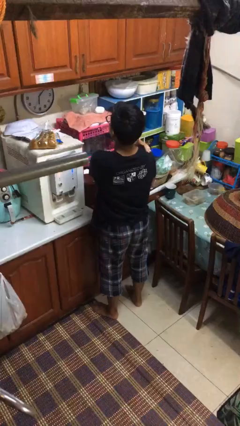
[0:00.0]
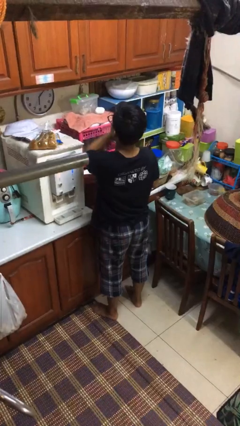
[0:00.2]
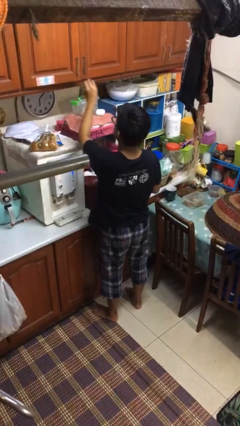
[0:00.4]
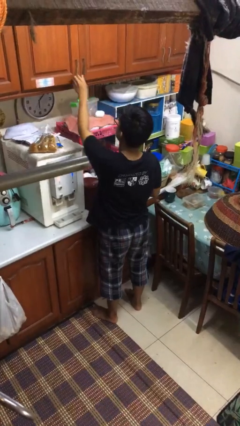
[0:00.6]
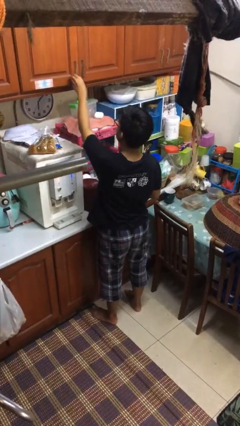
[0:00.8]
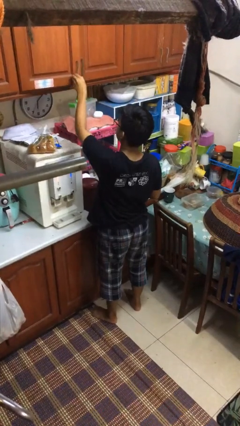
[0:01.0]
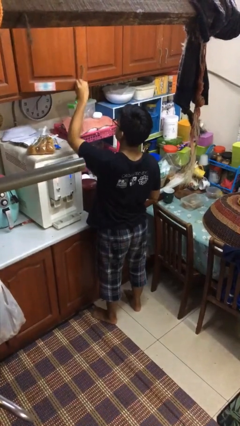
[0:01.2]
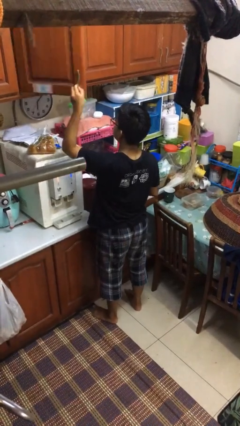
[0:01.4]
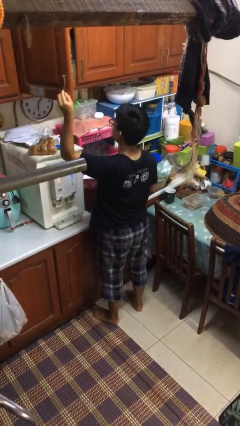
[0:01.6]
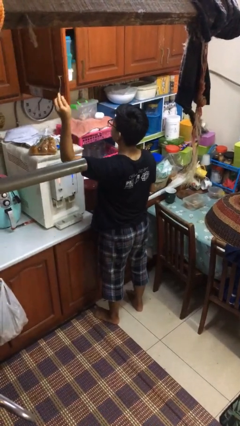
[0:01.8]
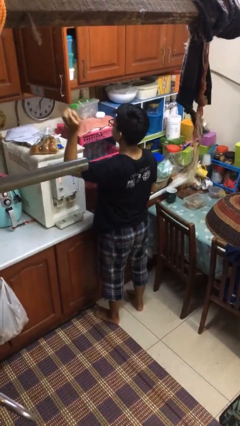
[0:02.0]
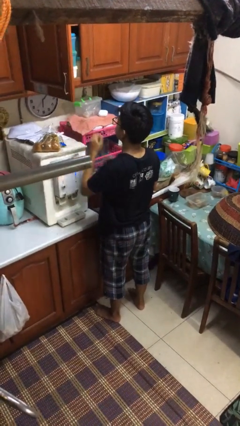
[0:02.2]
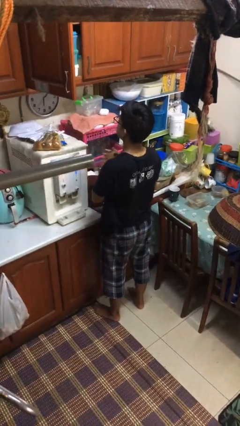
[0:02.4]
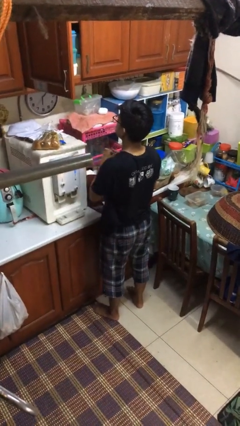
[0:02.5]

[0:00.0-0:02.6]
person opens kitchen drawer

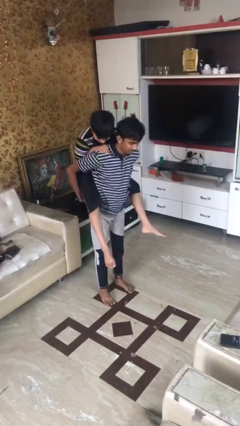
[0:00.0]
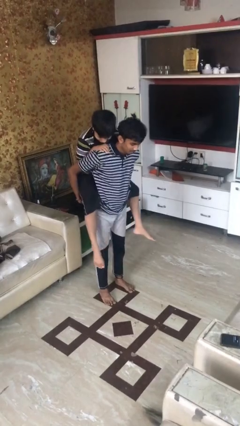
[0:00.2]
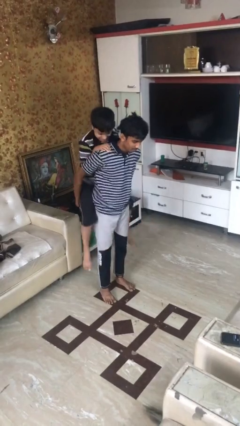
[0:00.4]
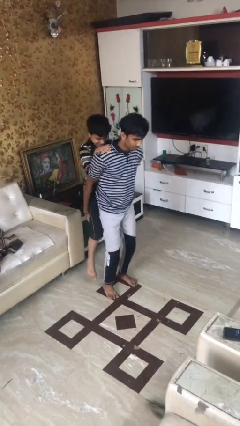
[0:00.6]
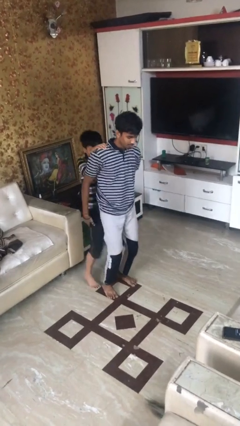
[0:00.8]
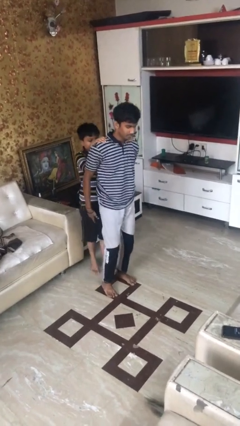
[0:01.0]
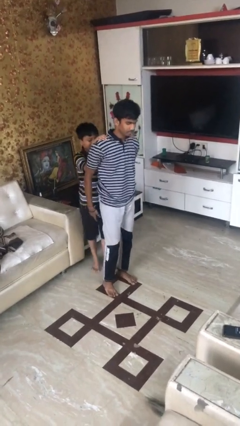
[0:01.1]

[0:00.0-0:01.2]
person puts down person

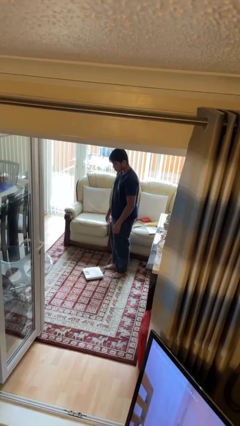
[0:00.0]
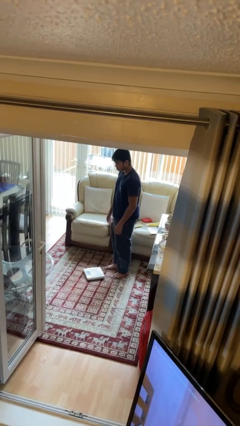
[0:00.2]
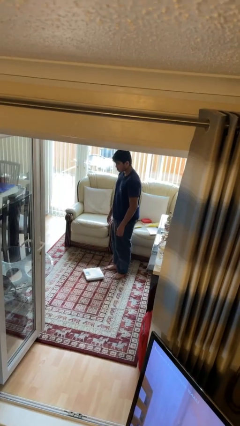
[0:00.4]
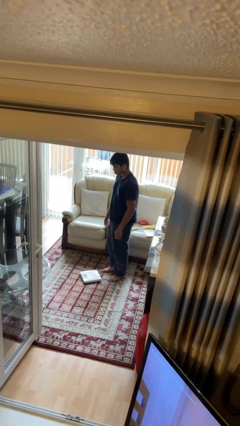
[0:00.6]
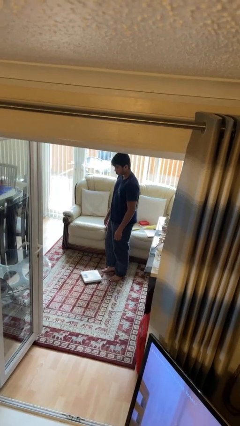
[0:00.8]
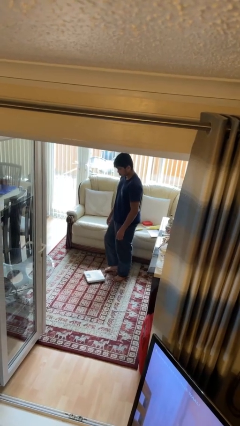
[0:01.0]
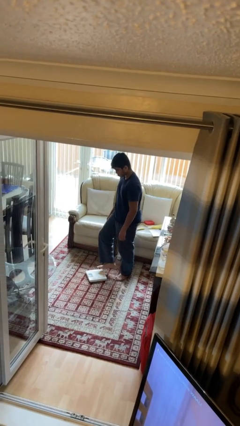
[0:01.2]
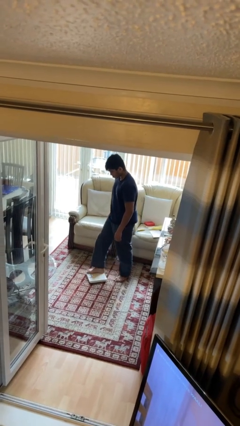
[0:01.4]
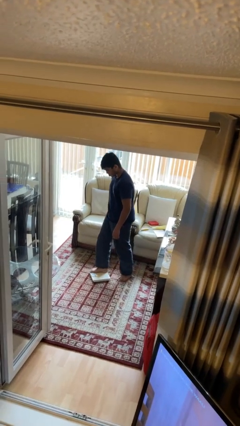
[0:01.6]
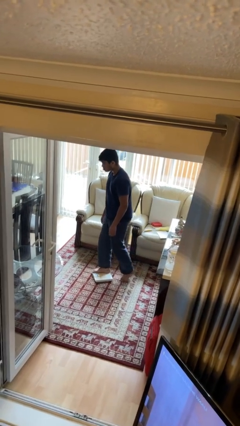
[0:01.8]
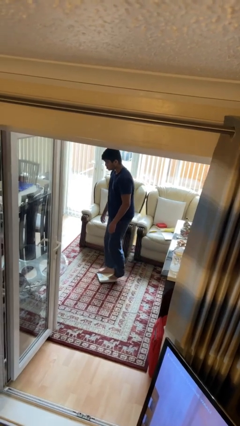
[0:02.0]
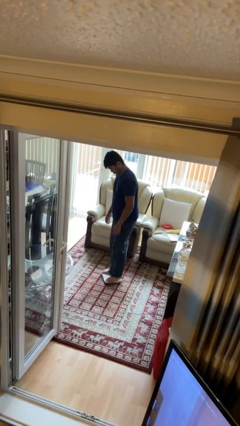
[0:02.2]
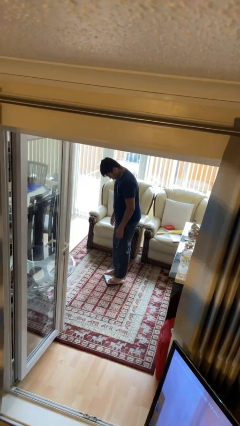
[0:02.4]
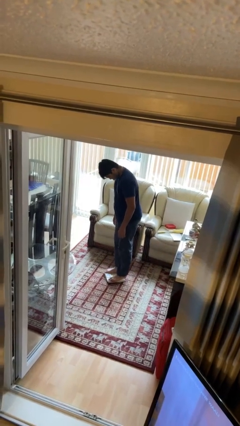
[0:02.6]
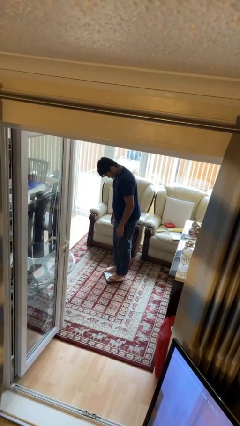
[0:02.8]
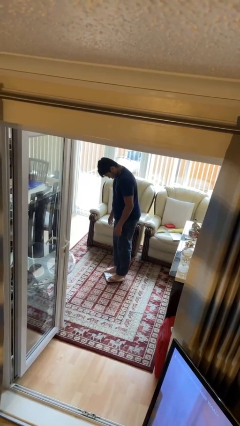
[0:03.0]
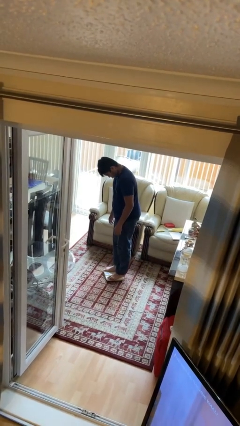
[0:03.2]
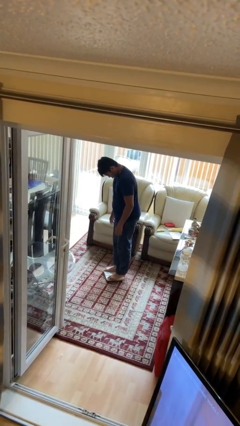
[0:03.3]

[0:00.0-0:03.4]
person uses bodyweight scale

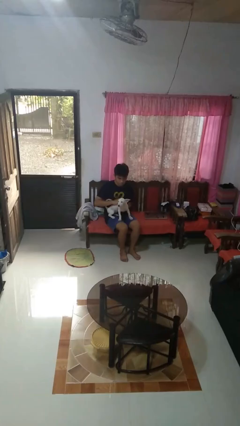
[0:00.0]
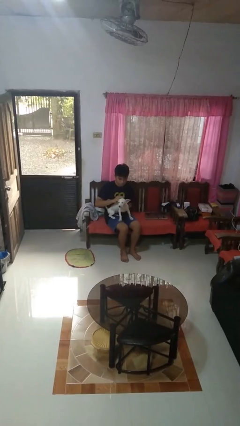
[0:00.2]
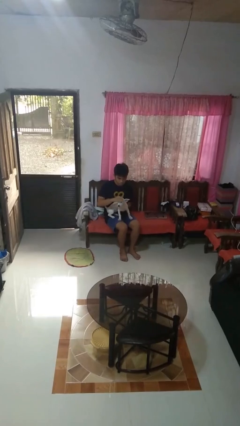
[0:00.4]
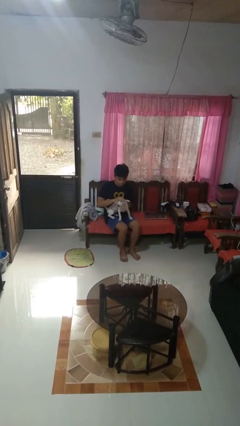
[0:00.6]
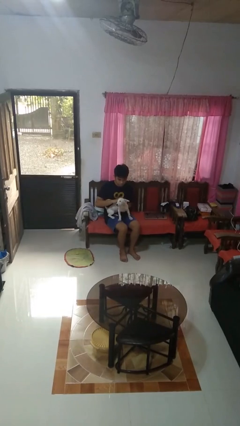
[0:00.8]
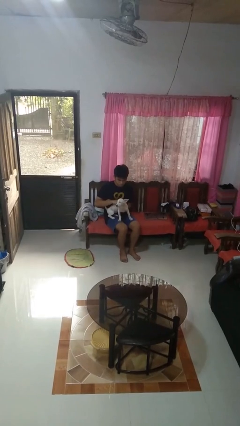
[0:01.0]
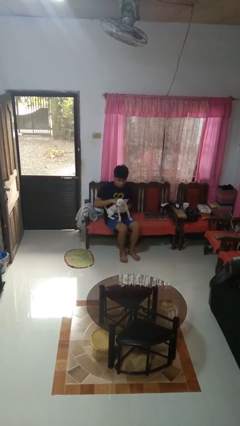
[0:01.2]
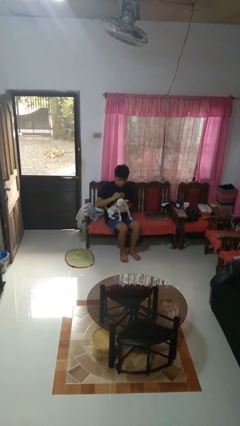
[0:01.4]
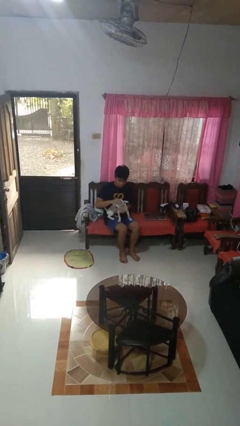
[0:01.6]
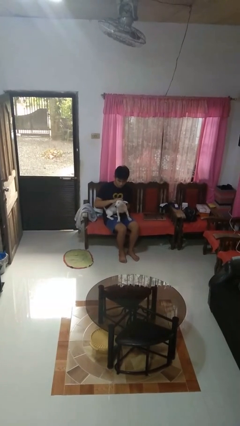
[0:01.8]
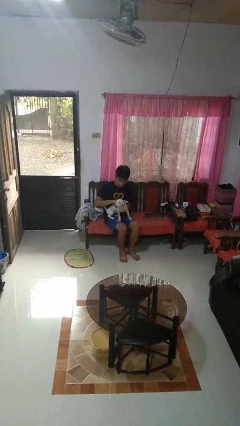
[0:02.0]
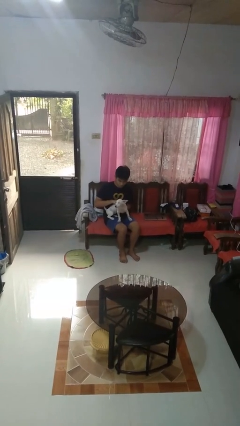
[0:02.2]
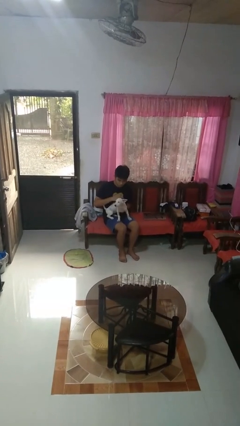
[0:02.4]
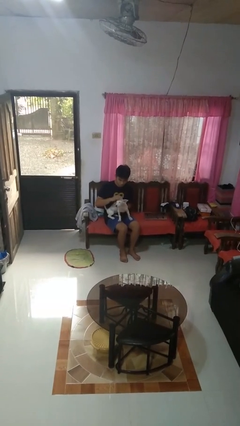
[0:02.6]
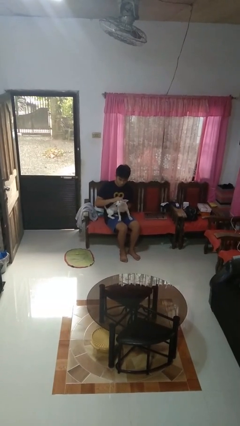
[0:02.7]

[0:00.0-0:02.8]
person pets dog

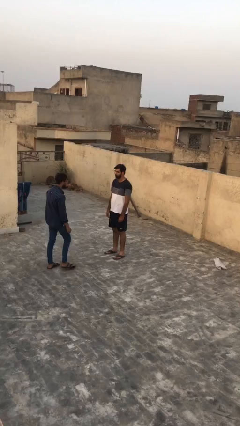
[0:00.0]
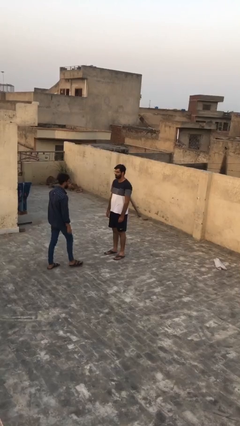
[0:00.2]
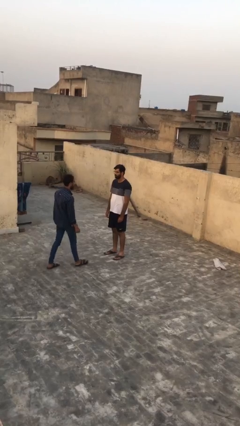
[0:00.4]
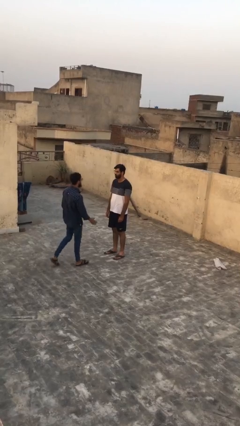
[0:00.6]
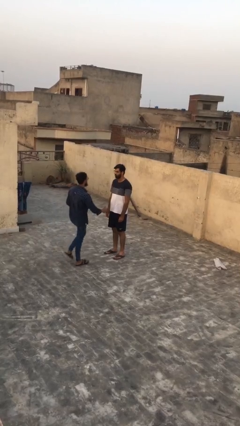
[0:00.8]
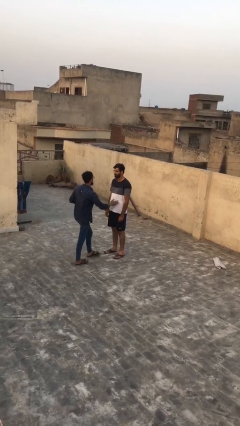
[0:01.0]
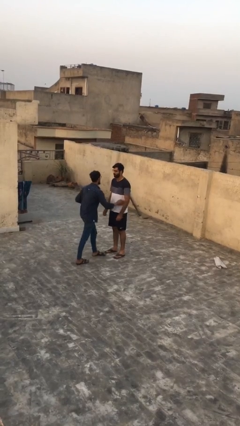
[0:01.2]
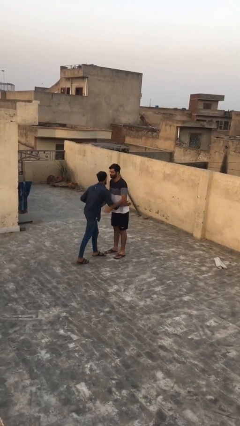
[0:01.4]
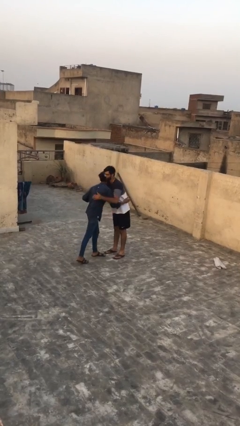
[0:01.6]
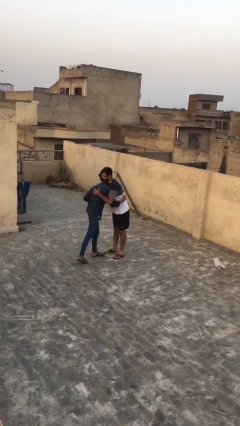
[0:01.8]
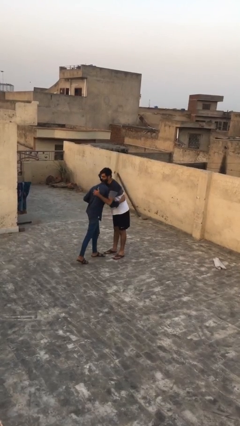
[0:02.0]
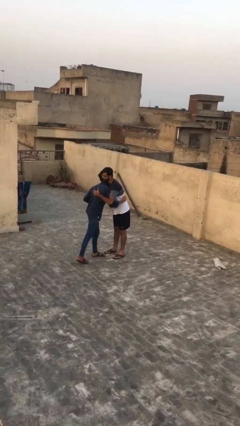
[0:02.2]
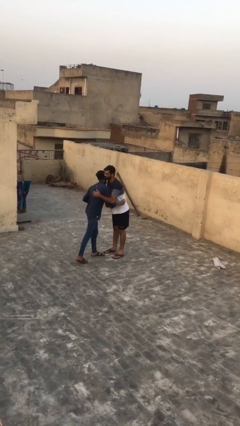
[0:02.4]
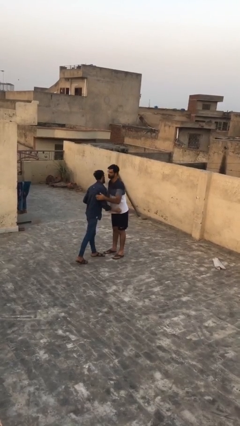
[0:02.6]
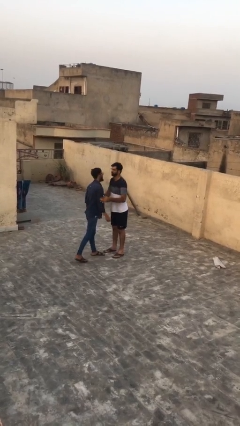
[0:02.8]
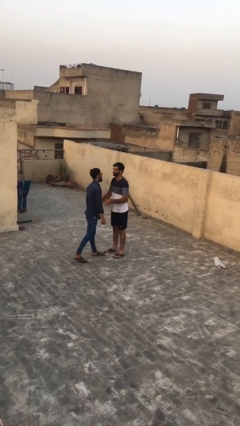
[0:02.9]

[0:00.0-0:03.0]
person embraces person

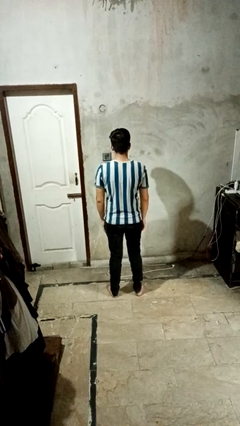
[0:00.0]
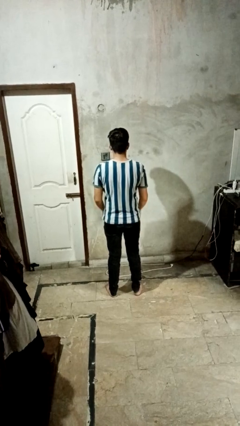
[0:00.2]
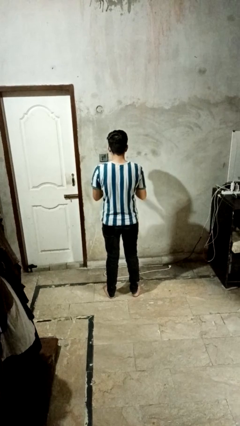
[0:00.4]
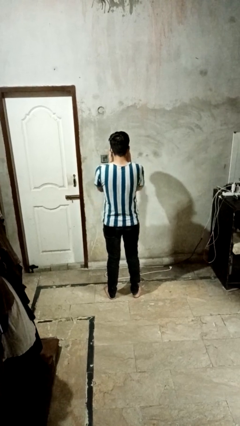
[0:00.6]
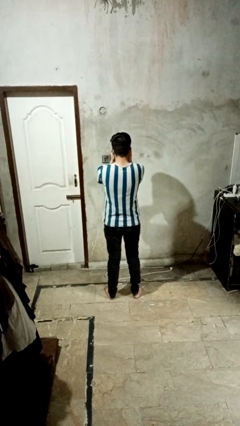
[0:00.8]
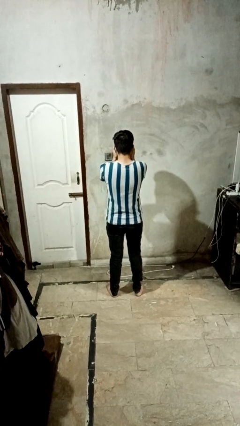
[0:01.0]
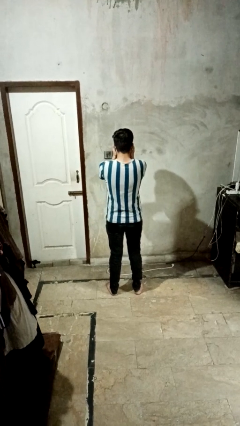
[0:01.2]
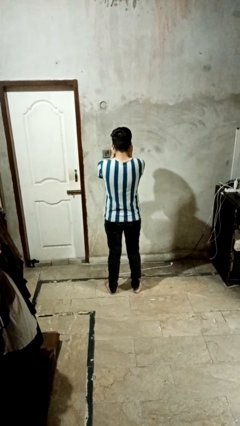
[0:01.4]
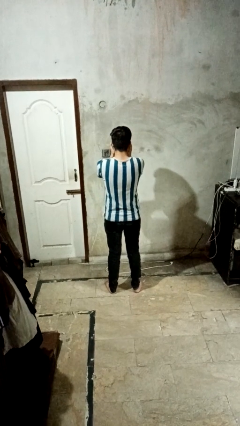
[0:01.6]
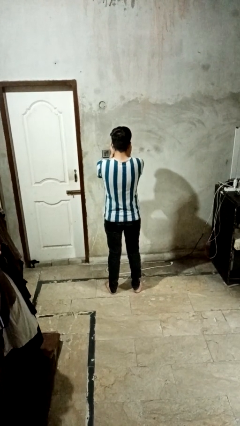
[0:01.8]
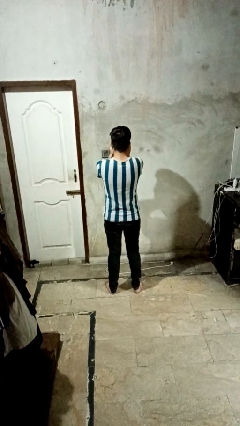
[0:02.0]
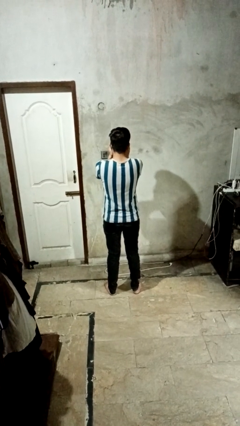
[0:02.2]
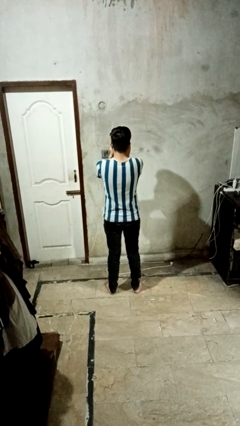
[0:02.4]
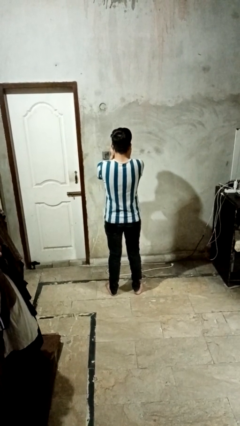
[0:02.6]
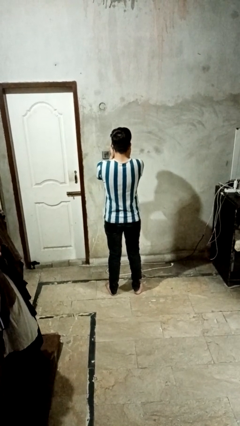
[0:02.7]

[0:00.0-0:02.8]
person covers face with hands

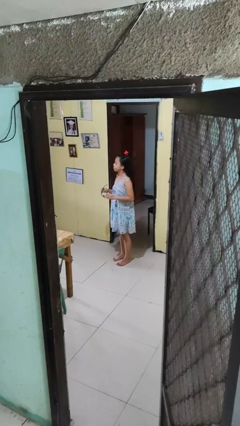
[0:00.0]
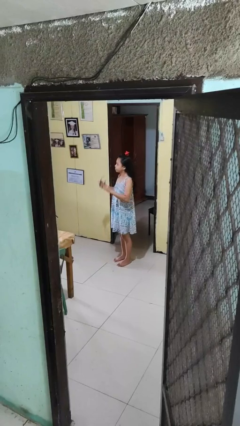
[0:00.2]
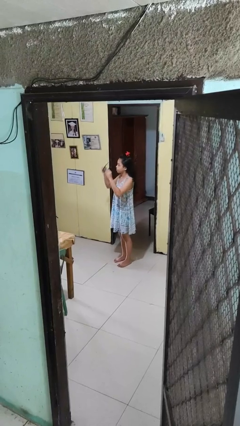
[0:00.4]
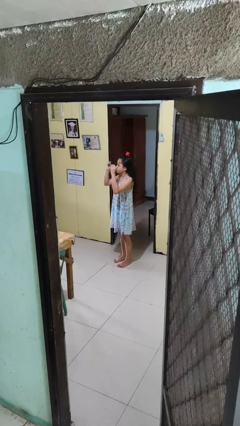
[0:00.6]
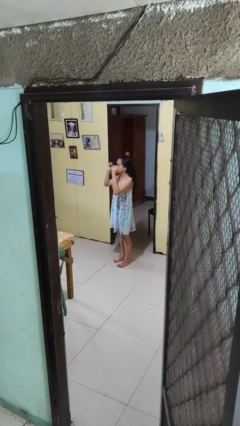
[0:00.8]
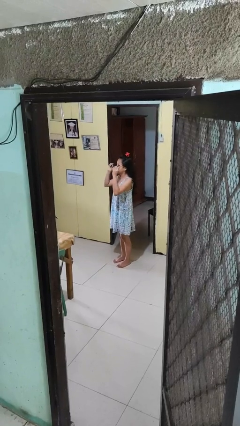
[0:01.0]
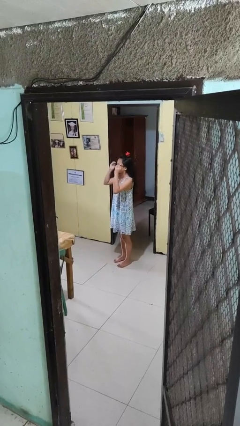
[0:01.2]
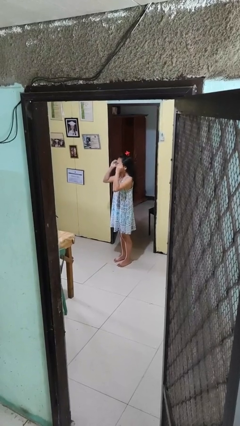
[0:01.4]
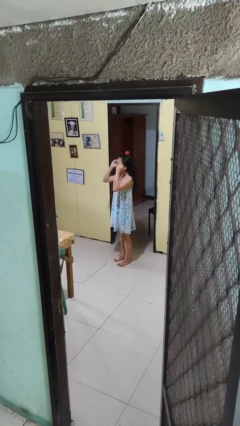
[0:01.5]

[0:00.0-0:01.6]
person puts on glasses
